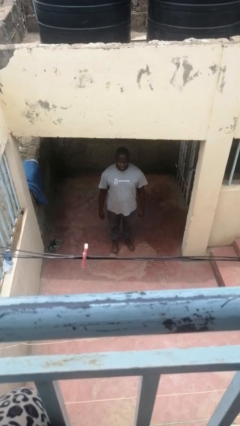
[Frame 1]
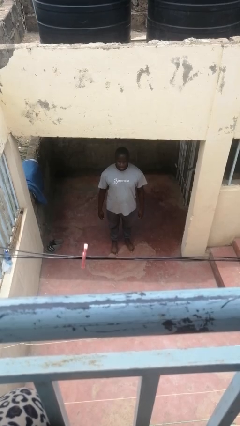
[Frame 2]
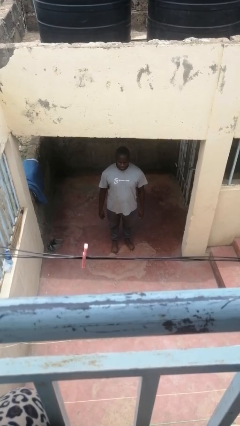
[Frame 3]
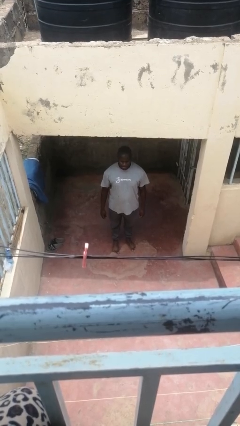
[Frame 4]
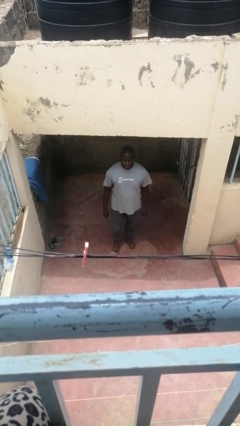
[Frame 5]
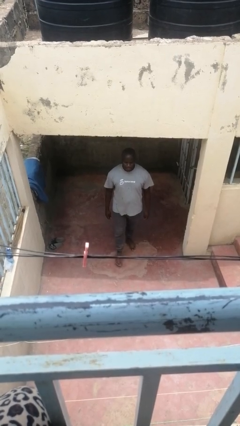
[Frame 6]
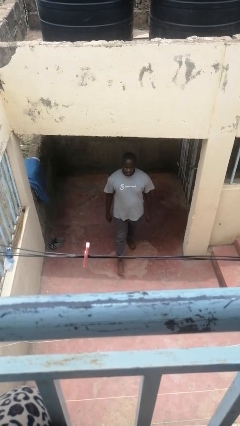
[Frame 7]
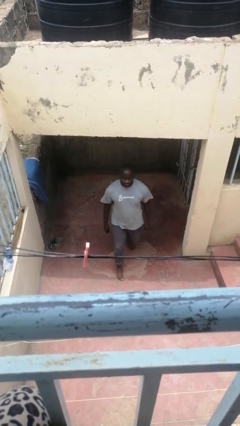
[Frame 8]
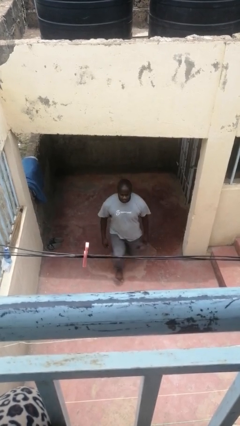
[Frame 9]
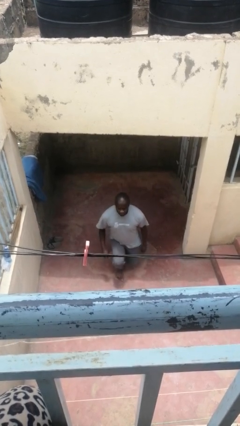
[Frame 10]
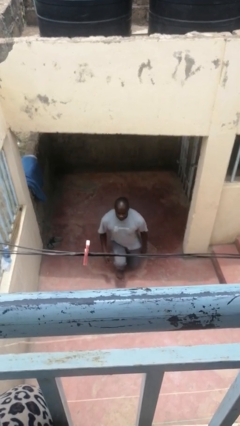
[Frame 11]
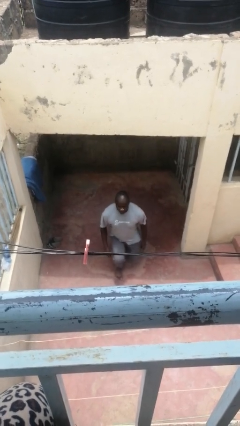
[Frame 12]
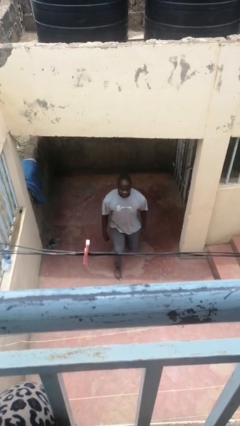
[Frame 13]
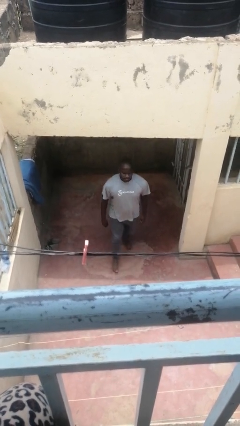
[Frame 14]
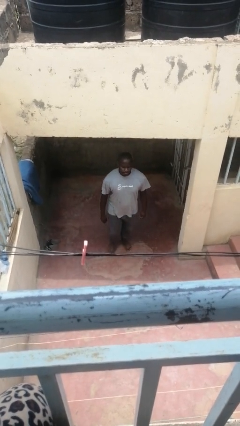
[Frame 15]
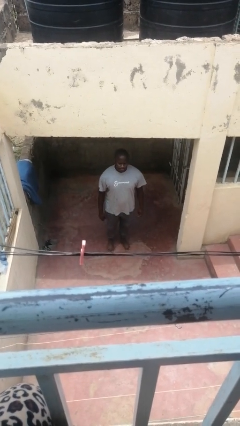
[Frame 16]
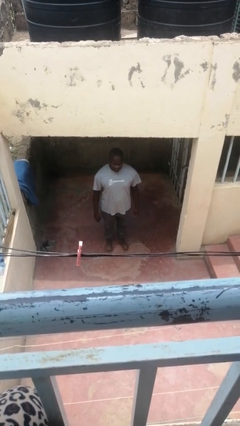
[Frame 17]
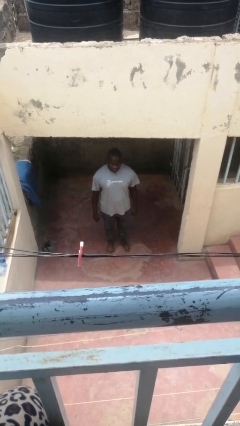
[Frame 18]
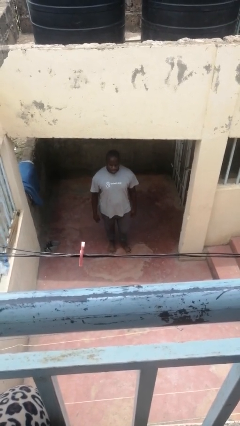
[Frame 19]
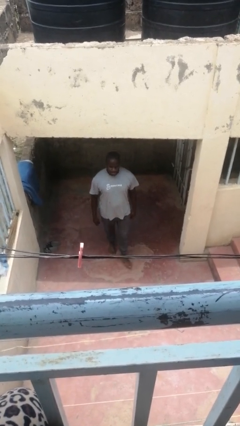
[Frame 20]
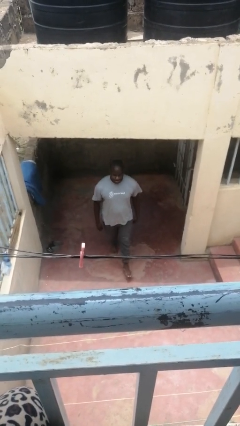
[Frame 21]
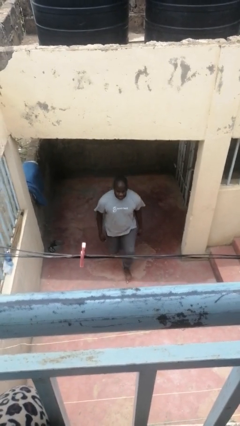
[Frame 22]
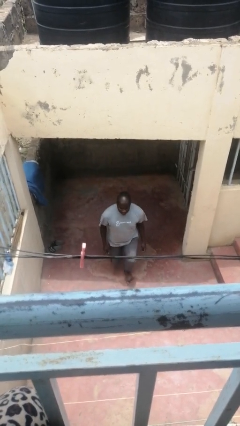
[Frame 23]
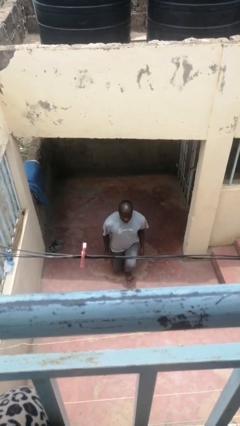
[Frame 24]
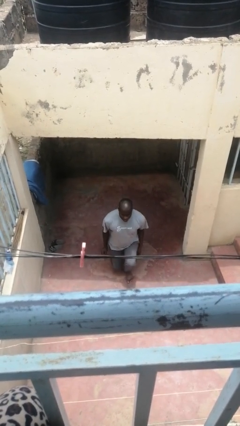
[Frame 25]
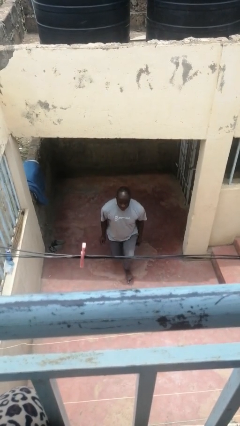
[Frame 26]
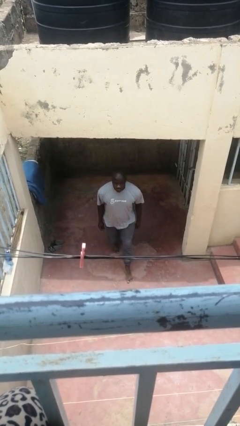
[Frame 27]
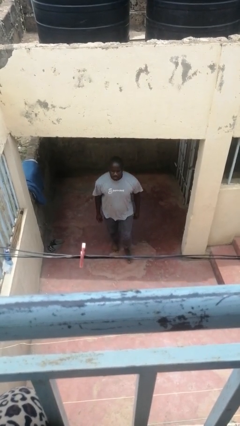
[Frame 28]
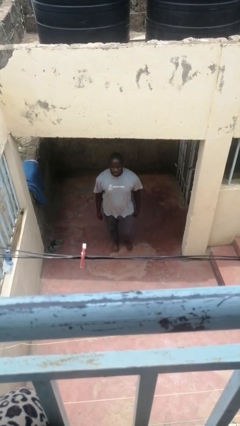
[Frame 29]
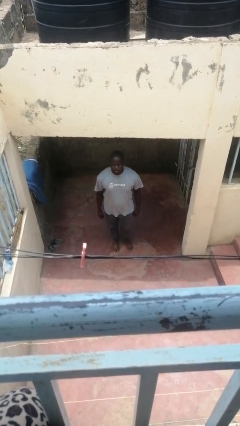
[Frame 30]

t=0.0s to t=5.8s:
person exercises with lunges

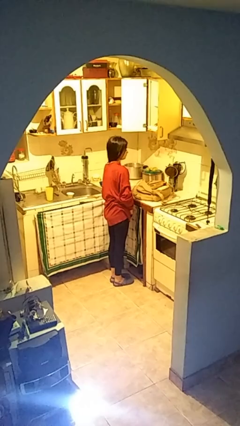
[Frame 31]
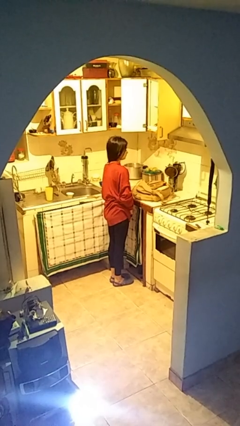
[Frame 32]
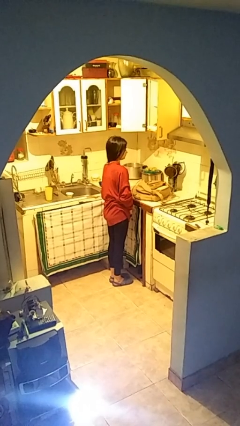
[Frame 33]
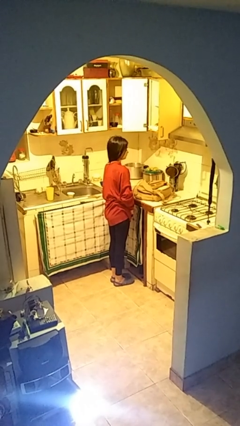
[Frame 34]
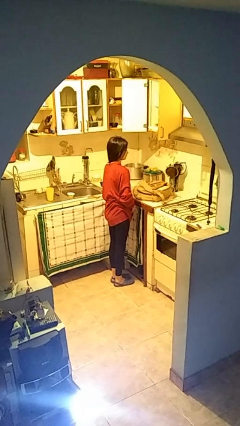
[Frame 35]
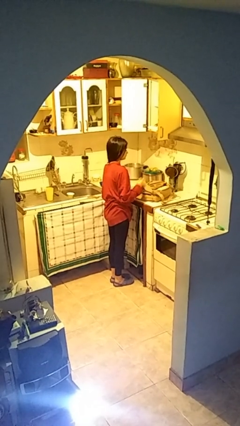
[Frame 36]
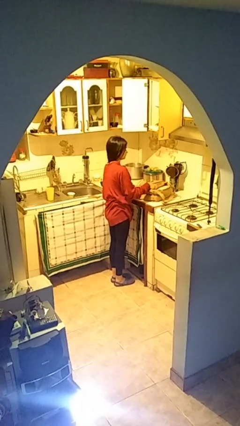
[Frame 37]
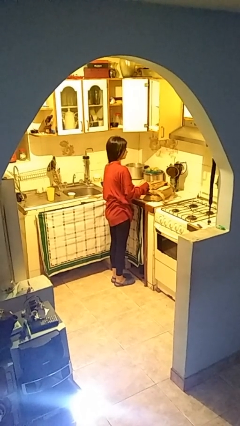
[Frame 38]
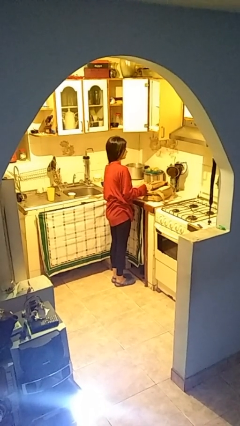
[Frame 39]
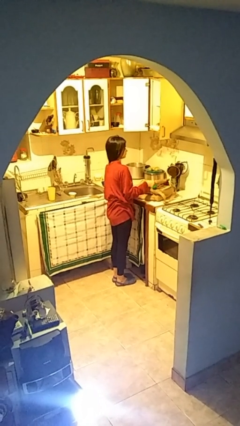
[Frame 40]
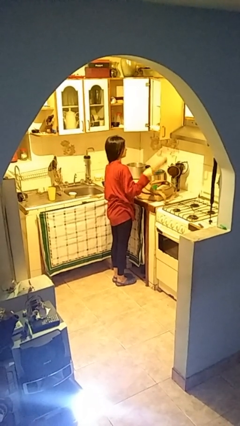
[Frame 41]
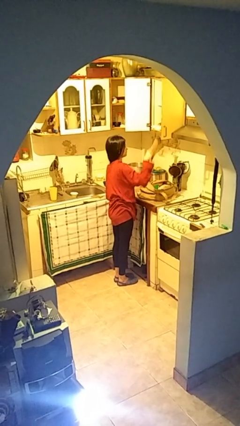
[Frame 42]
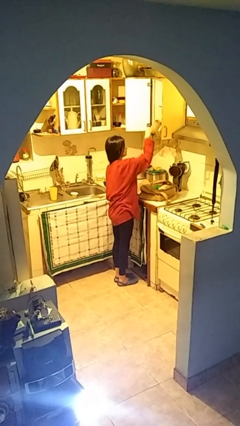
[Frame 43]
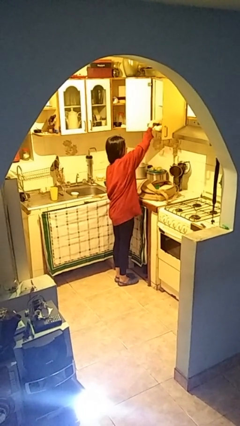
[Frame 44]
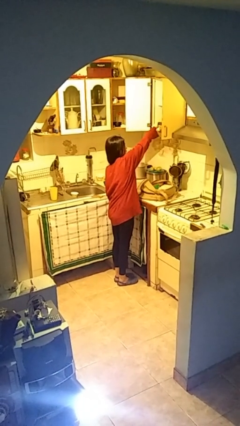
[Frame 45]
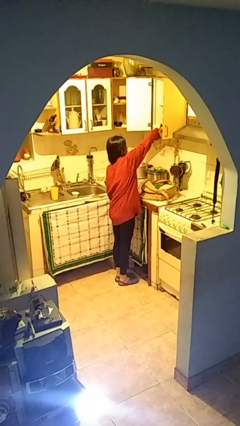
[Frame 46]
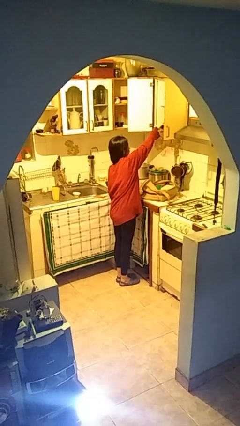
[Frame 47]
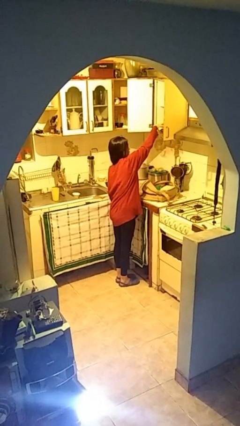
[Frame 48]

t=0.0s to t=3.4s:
person loads groceries into cabinet

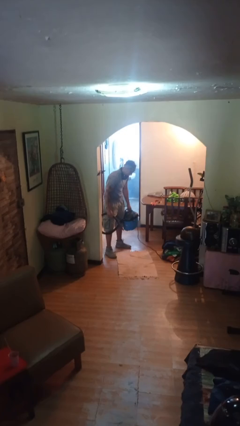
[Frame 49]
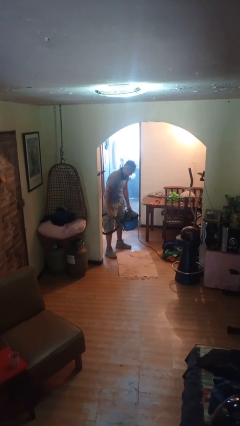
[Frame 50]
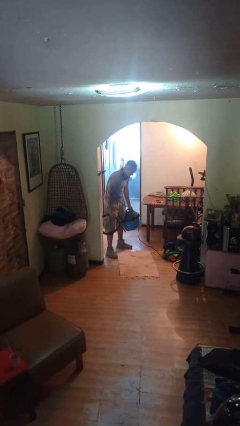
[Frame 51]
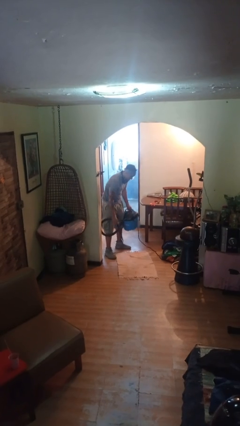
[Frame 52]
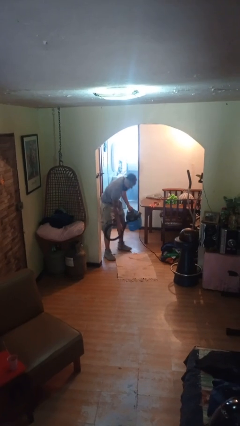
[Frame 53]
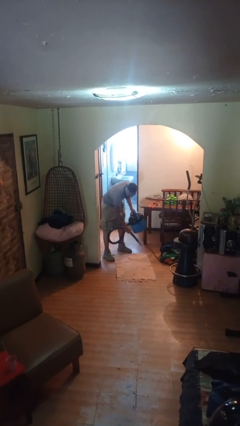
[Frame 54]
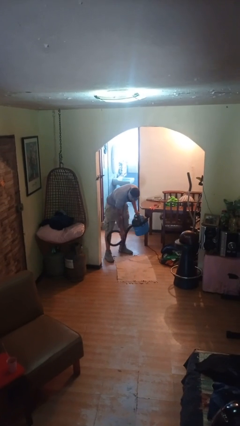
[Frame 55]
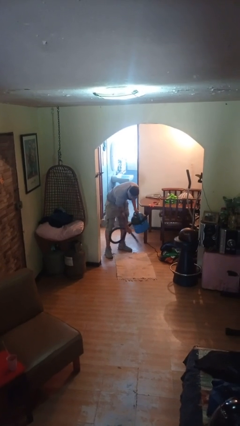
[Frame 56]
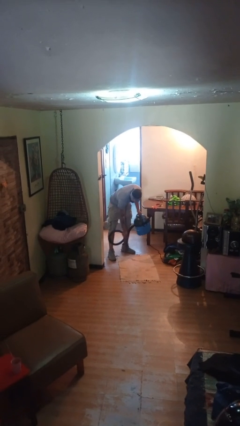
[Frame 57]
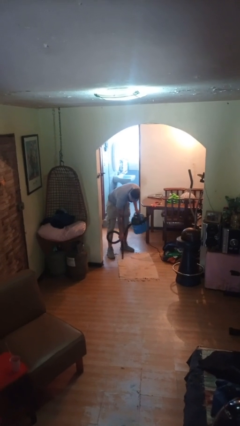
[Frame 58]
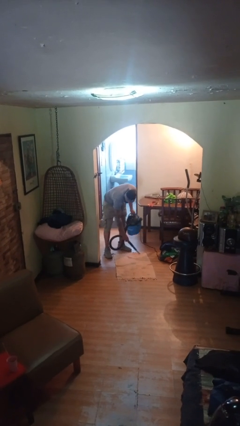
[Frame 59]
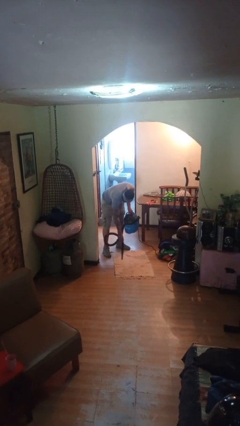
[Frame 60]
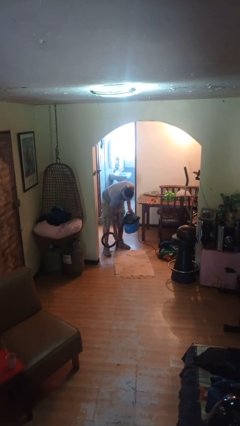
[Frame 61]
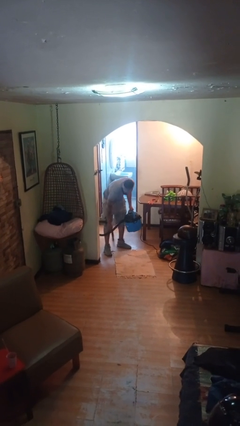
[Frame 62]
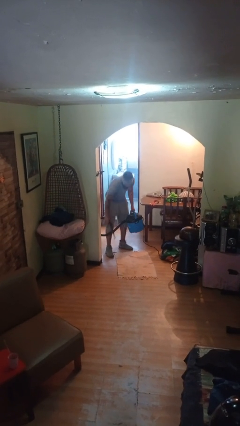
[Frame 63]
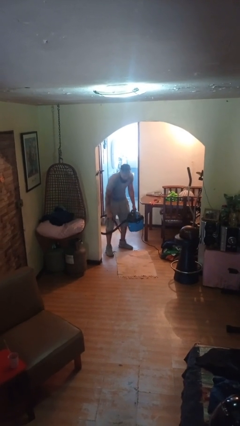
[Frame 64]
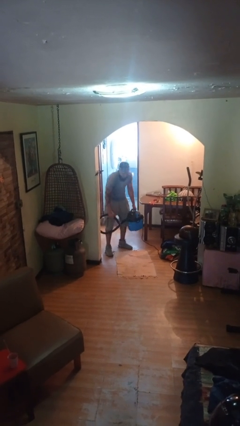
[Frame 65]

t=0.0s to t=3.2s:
person vacuums carpet

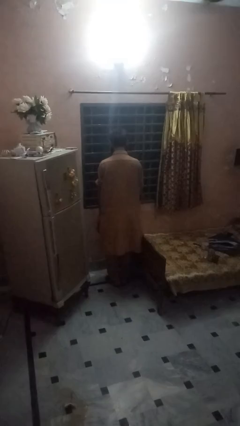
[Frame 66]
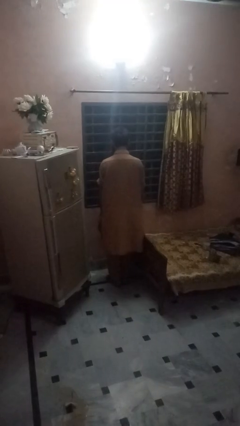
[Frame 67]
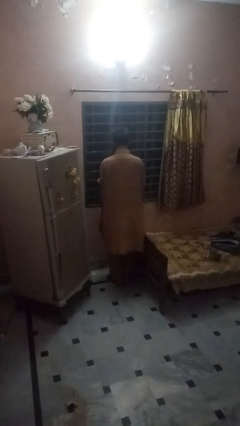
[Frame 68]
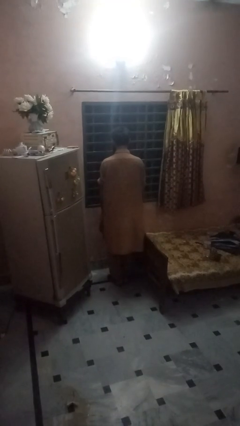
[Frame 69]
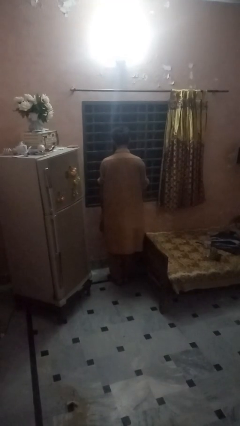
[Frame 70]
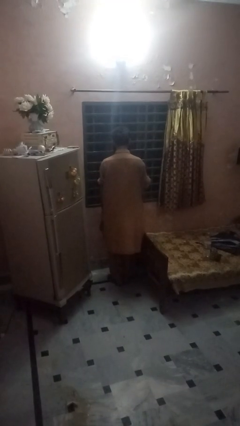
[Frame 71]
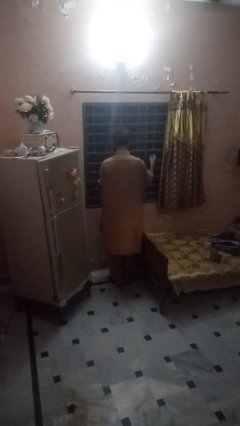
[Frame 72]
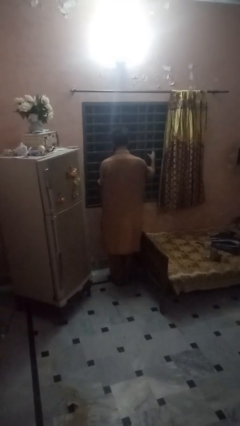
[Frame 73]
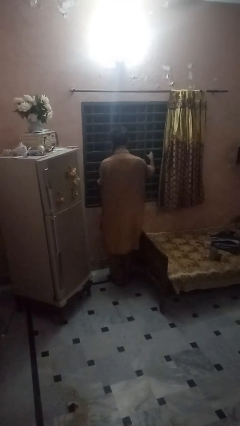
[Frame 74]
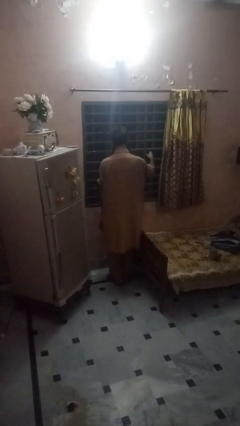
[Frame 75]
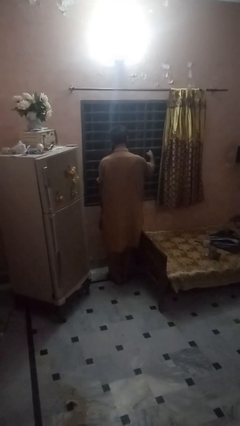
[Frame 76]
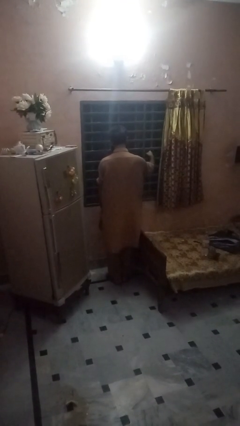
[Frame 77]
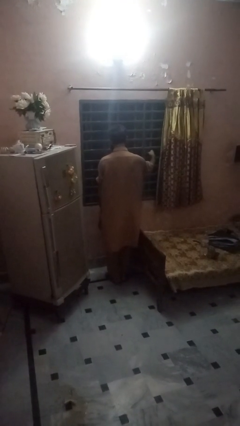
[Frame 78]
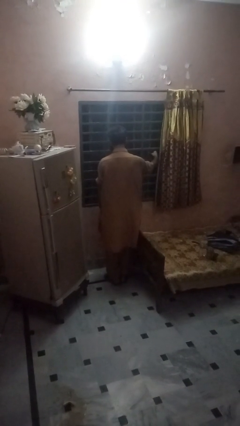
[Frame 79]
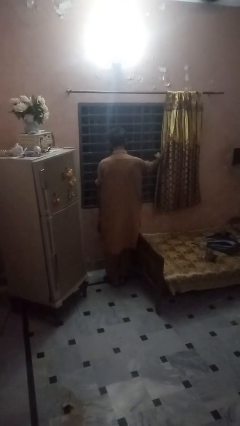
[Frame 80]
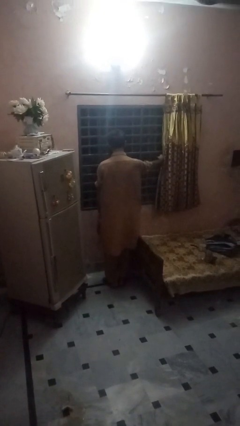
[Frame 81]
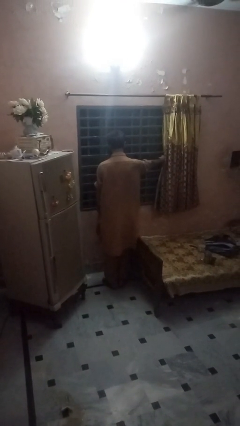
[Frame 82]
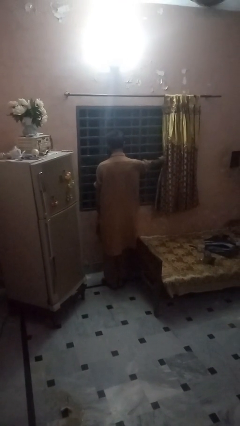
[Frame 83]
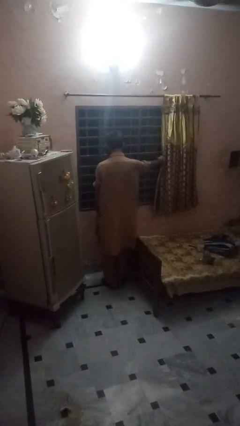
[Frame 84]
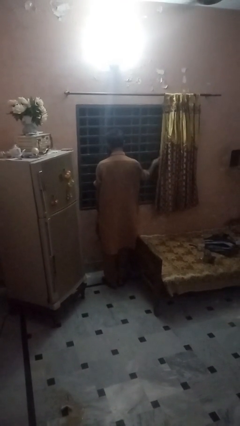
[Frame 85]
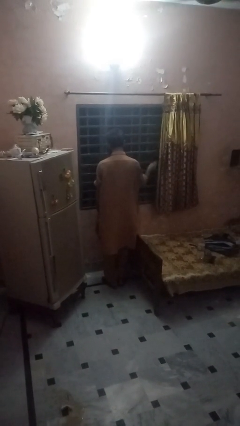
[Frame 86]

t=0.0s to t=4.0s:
person opens home window

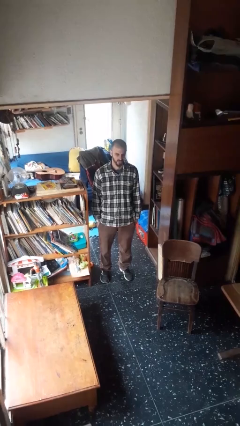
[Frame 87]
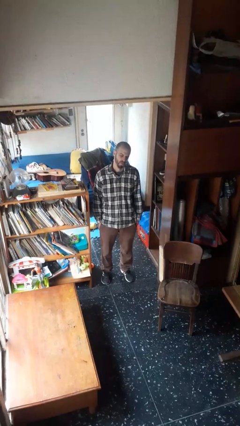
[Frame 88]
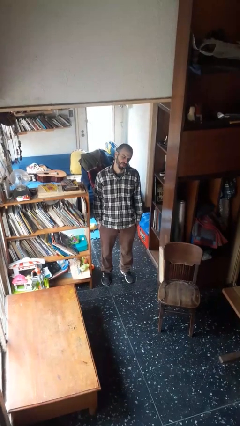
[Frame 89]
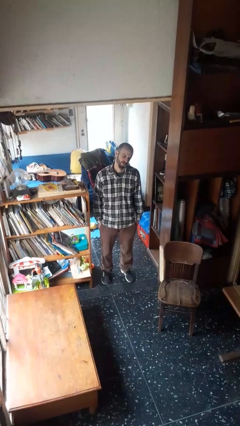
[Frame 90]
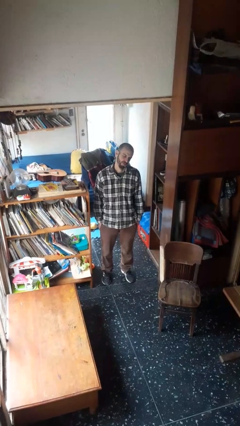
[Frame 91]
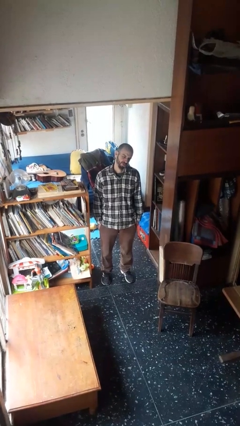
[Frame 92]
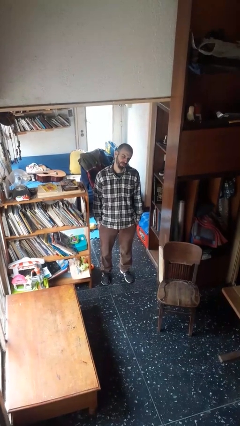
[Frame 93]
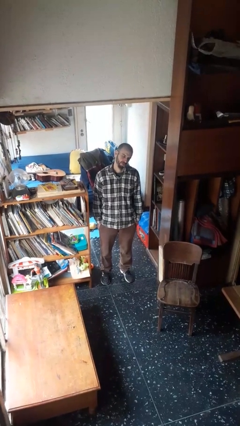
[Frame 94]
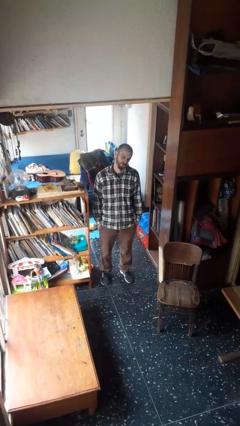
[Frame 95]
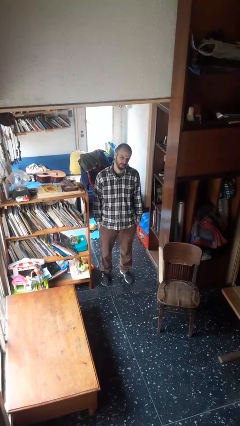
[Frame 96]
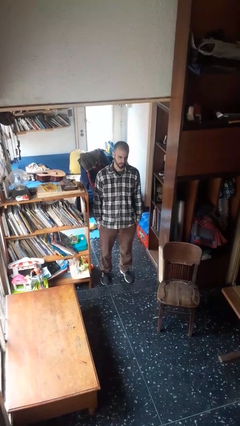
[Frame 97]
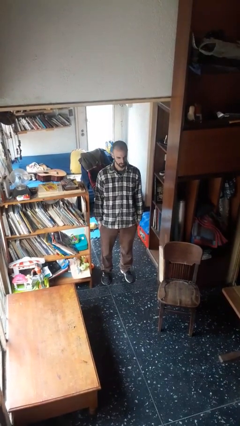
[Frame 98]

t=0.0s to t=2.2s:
person sticks out tongue
